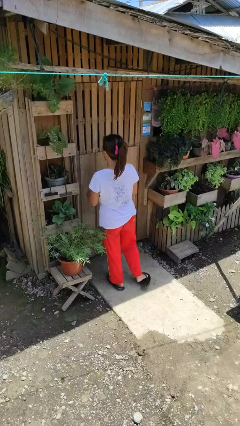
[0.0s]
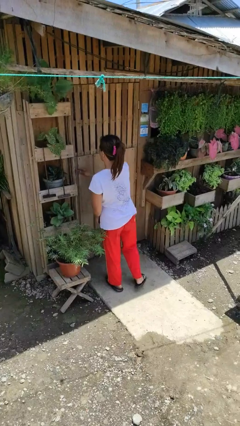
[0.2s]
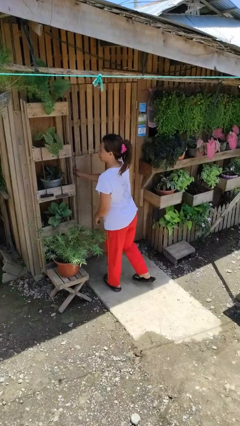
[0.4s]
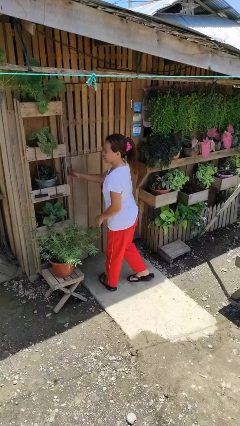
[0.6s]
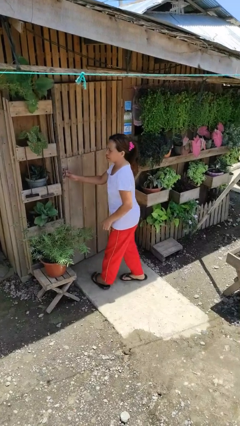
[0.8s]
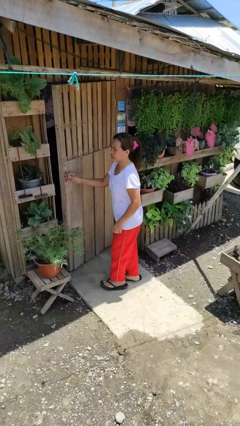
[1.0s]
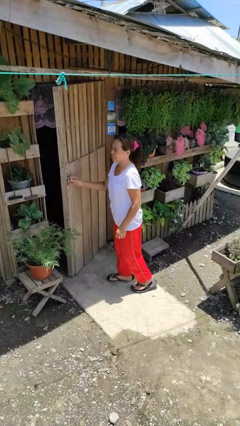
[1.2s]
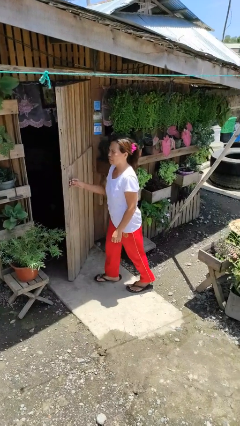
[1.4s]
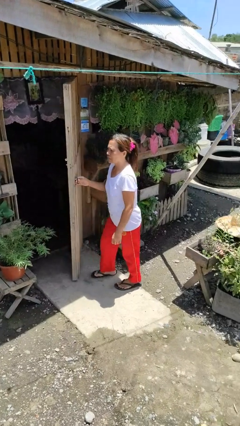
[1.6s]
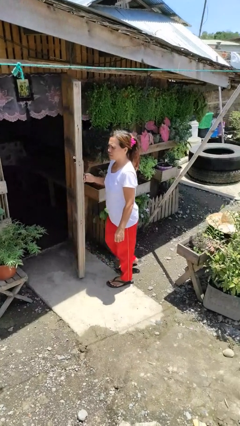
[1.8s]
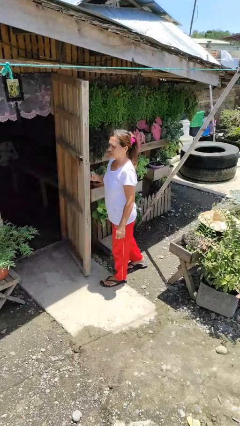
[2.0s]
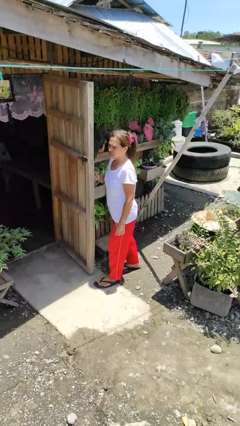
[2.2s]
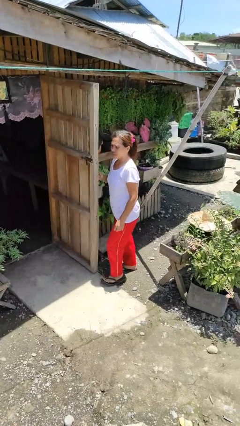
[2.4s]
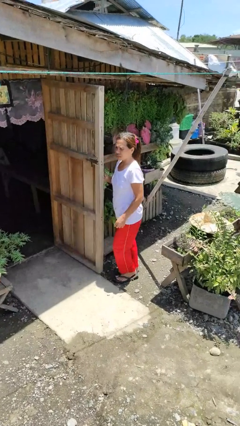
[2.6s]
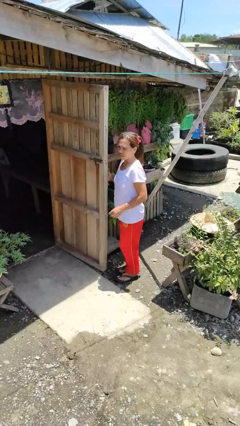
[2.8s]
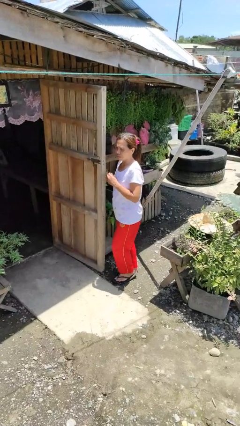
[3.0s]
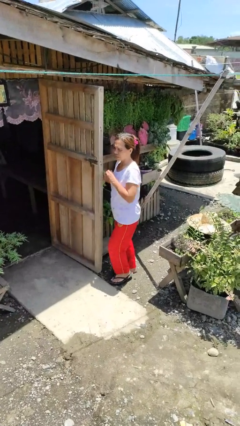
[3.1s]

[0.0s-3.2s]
person opens facility door

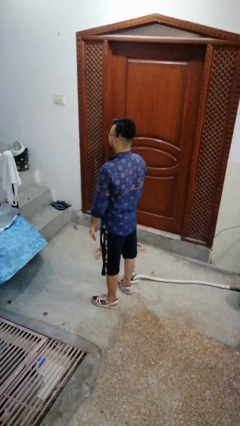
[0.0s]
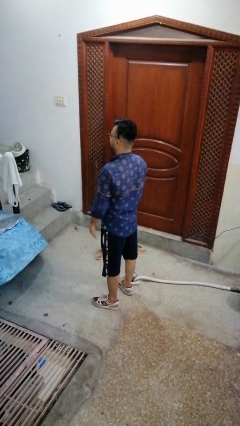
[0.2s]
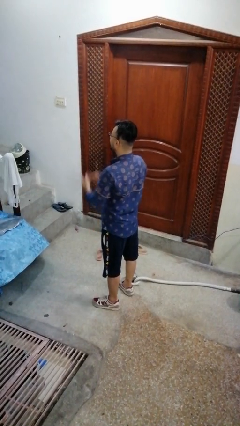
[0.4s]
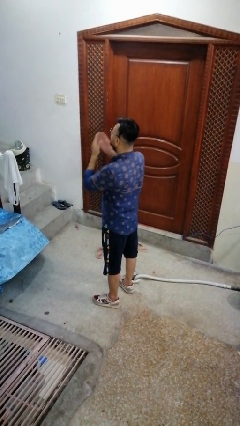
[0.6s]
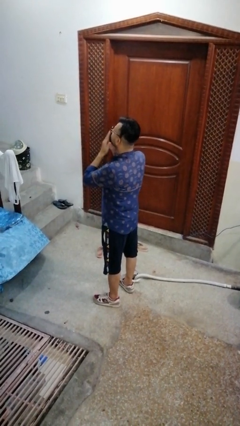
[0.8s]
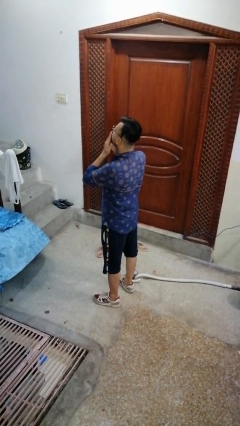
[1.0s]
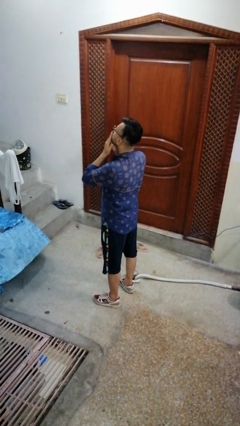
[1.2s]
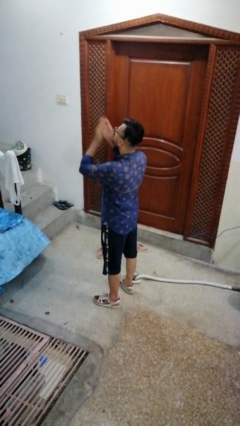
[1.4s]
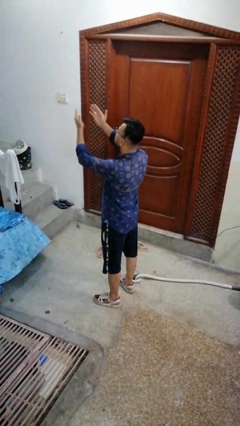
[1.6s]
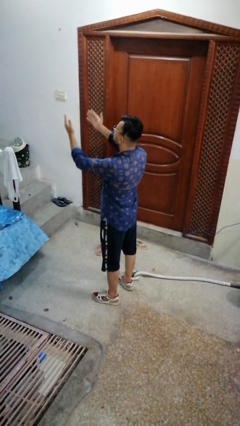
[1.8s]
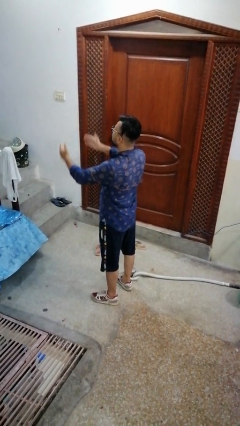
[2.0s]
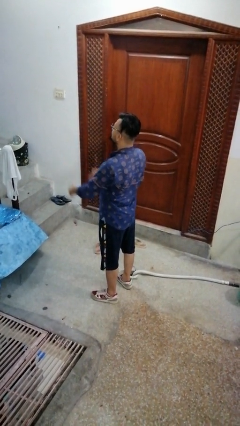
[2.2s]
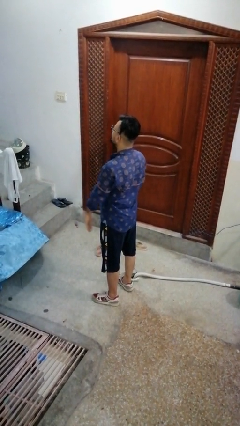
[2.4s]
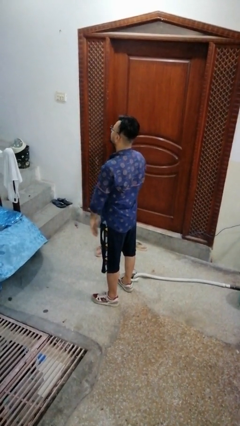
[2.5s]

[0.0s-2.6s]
person gestures blow kiss

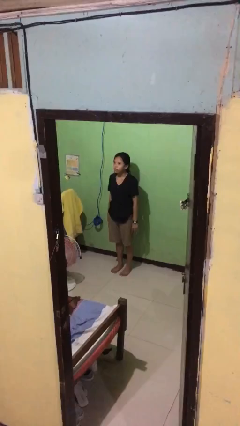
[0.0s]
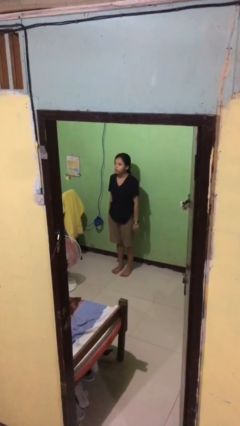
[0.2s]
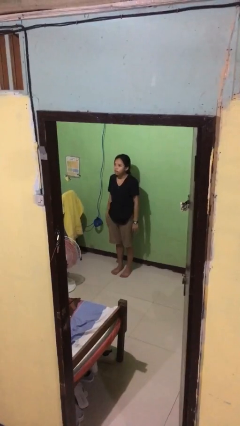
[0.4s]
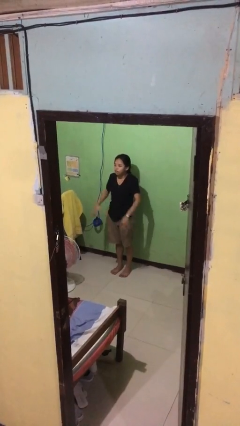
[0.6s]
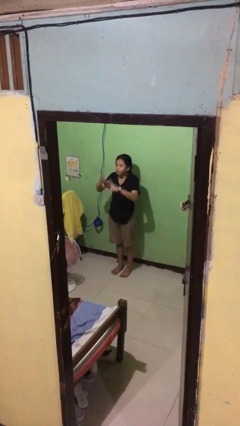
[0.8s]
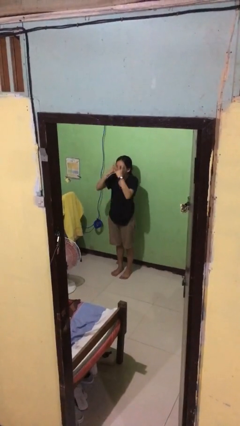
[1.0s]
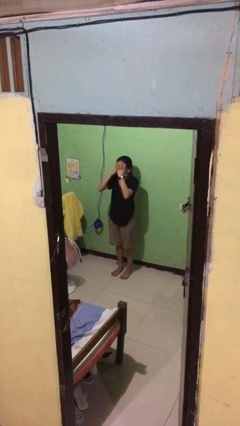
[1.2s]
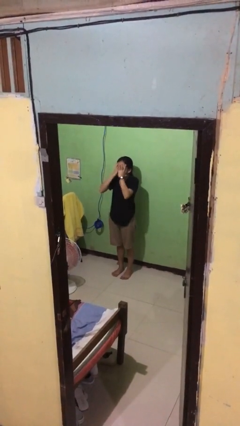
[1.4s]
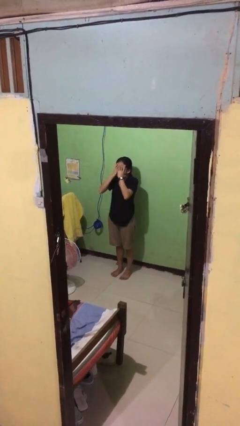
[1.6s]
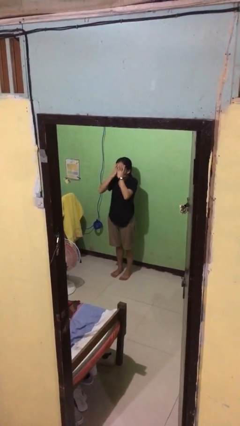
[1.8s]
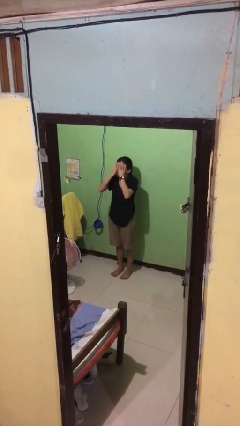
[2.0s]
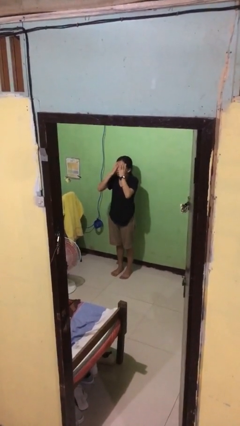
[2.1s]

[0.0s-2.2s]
person covers face with hands

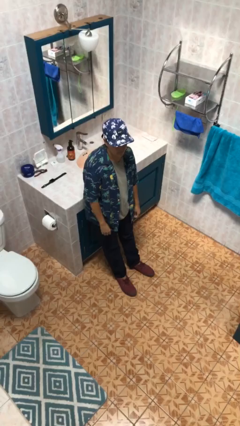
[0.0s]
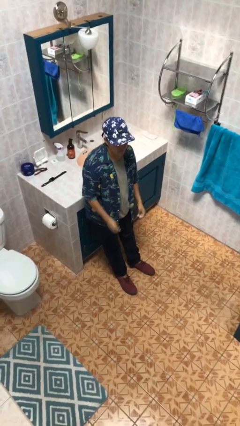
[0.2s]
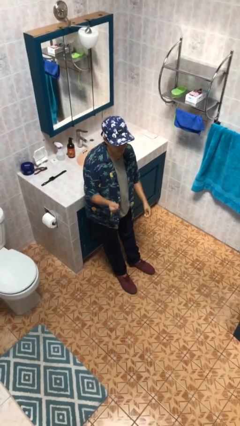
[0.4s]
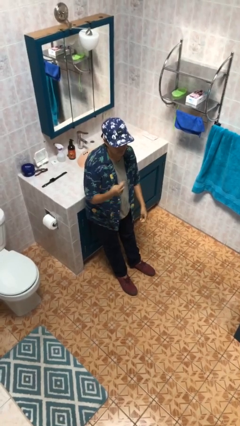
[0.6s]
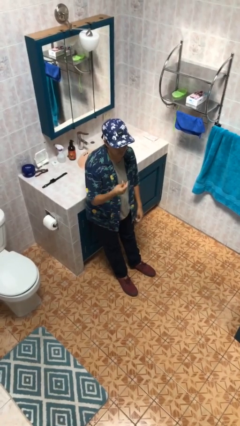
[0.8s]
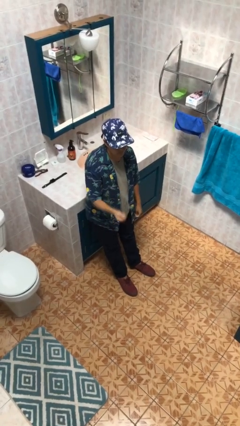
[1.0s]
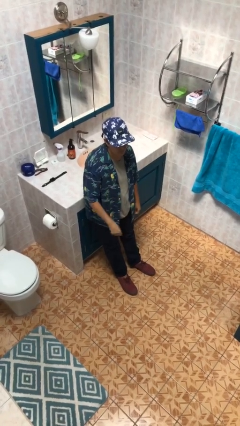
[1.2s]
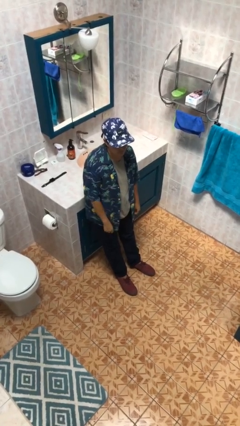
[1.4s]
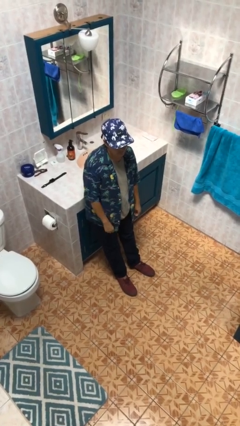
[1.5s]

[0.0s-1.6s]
person snaps fingers

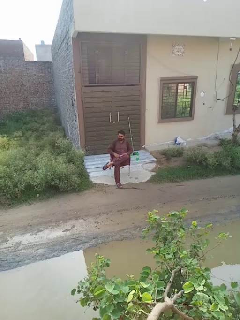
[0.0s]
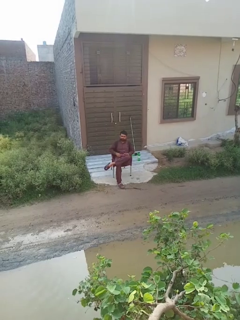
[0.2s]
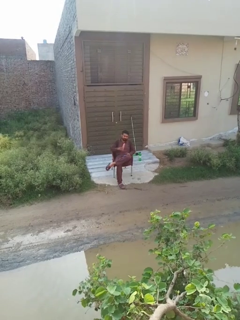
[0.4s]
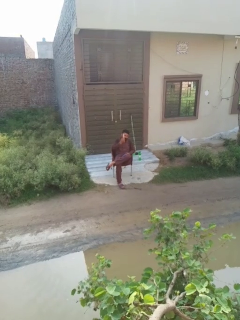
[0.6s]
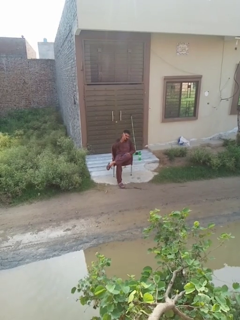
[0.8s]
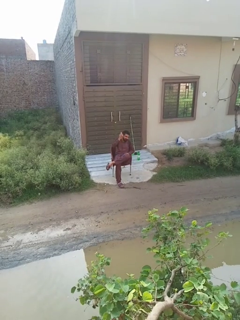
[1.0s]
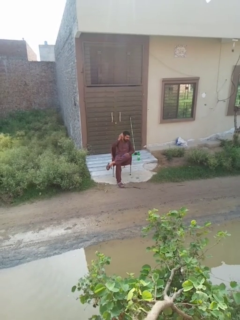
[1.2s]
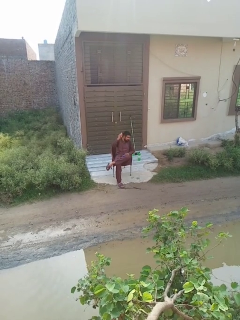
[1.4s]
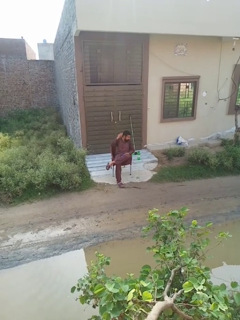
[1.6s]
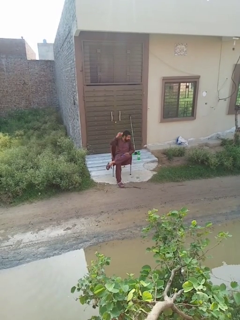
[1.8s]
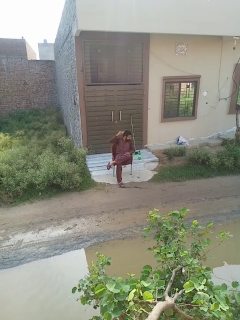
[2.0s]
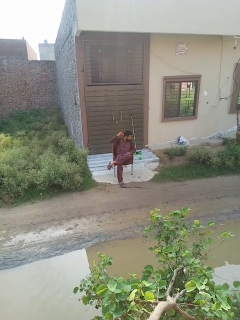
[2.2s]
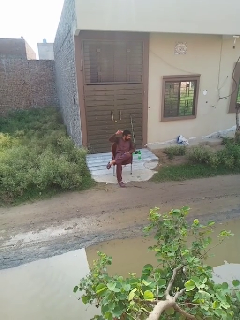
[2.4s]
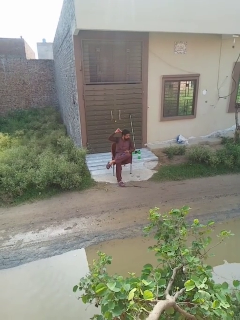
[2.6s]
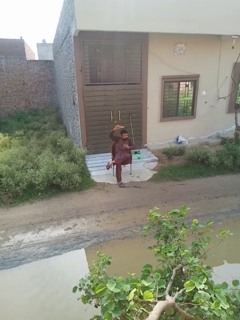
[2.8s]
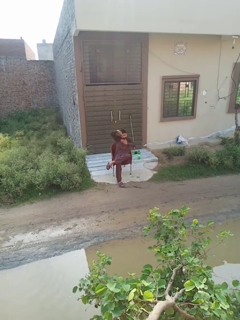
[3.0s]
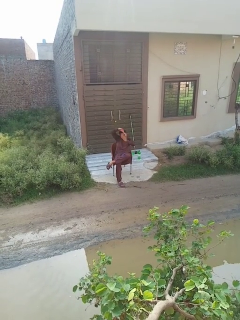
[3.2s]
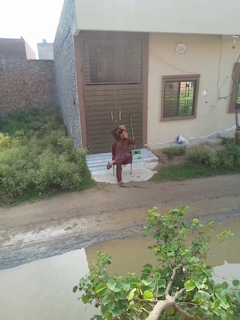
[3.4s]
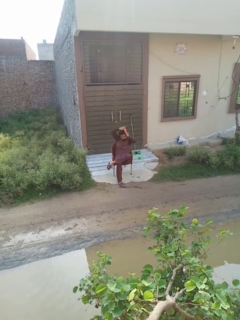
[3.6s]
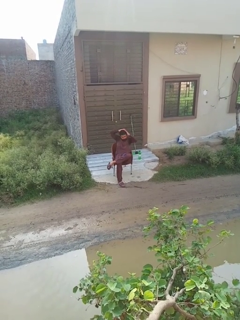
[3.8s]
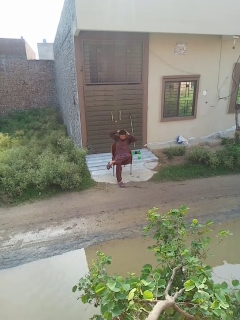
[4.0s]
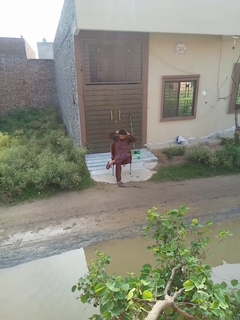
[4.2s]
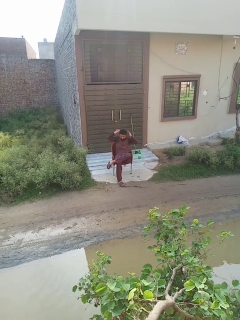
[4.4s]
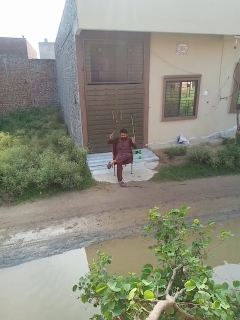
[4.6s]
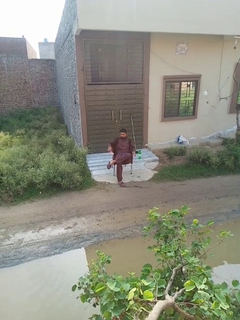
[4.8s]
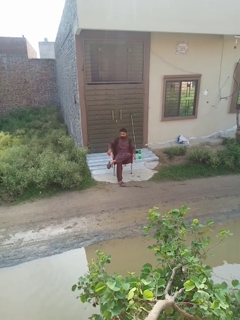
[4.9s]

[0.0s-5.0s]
person brushes hair

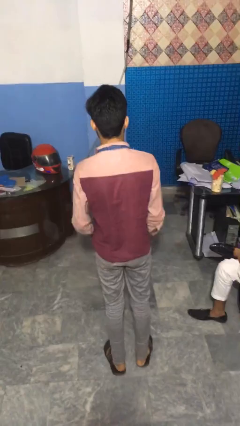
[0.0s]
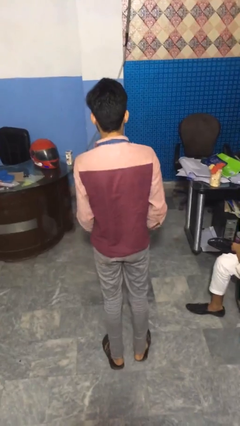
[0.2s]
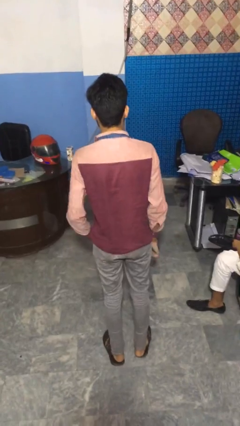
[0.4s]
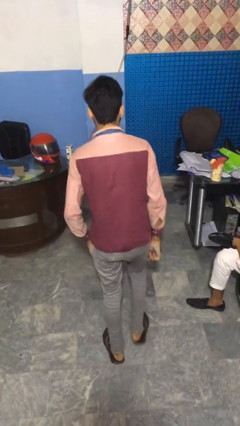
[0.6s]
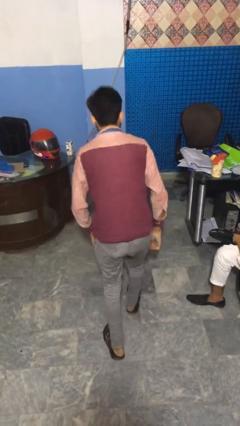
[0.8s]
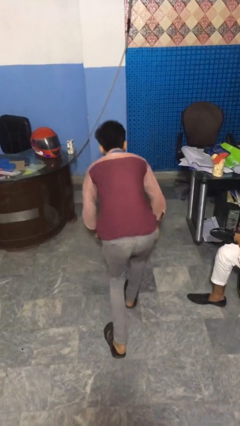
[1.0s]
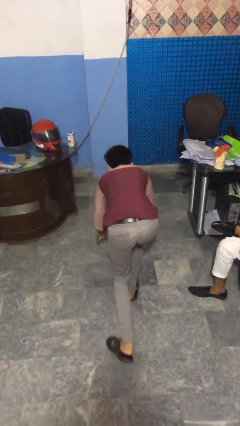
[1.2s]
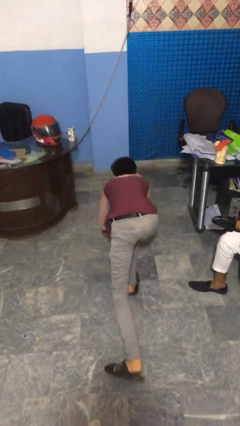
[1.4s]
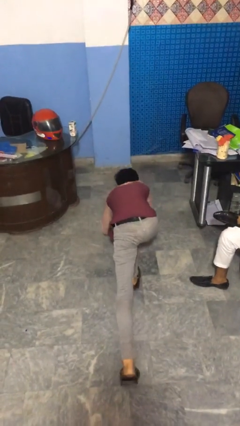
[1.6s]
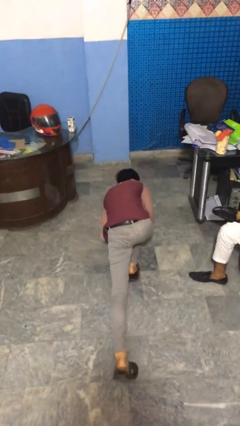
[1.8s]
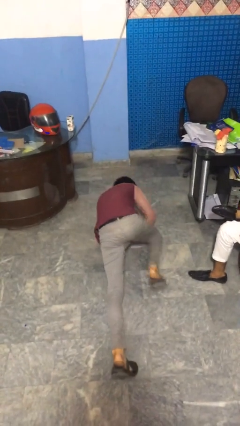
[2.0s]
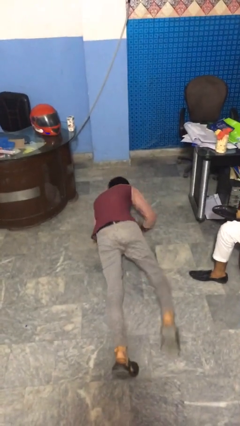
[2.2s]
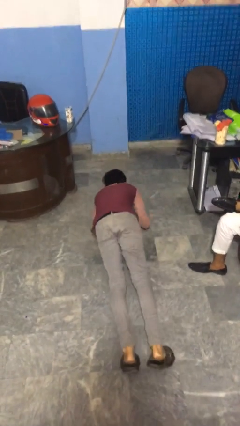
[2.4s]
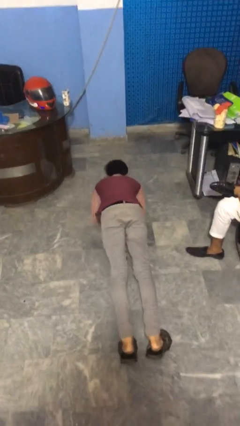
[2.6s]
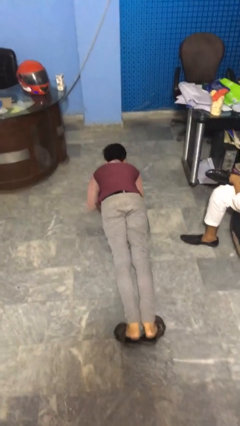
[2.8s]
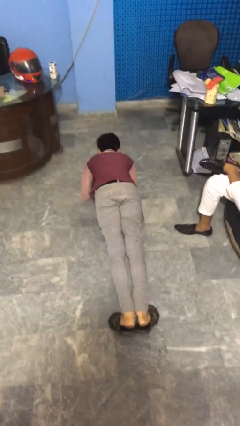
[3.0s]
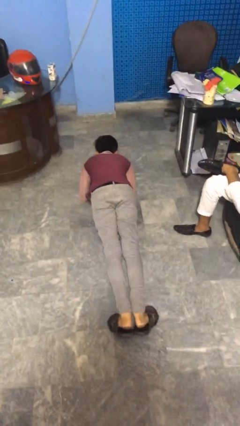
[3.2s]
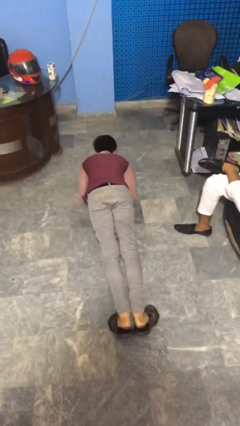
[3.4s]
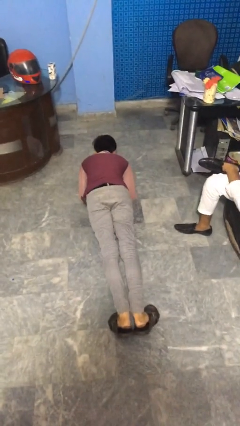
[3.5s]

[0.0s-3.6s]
person exercises with plank

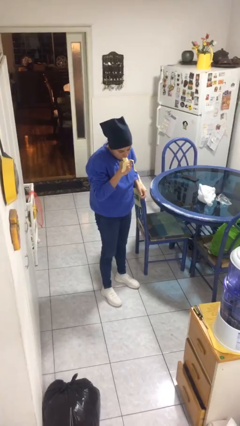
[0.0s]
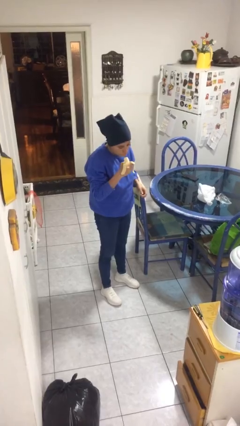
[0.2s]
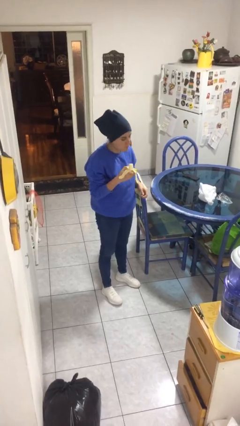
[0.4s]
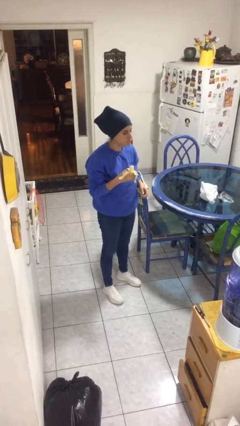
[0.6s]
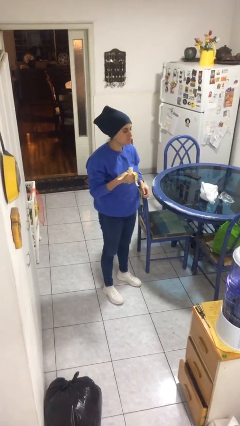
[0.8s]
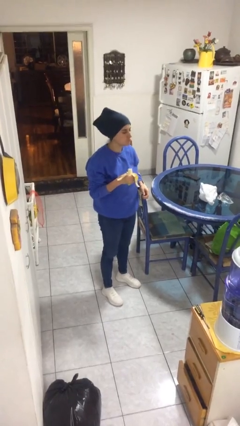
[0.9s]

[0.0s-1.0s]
person eats banana
